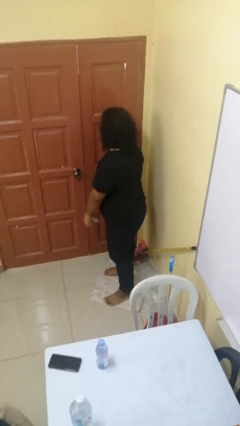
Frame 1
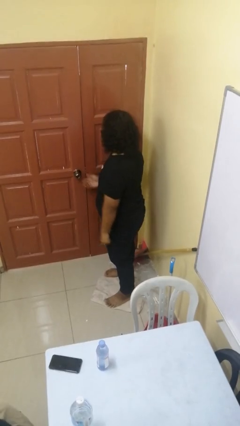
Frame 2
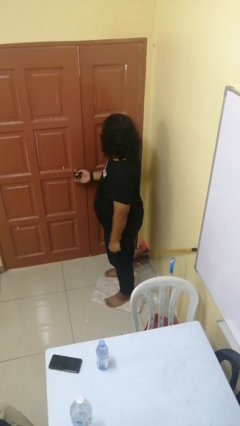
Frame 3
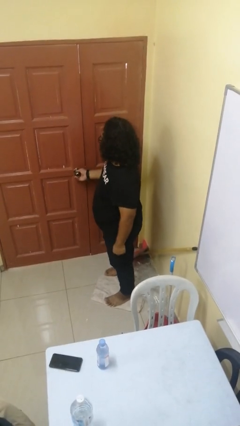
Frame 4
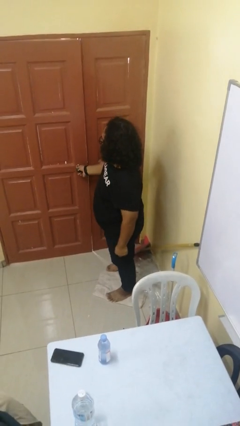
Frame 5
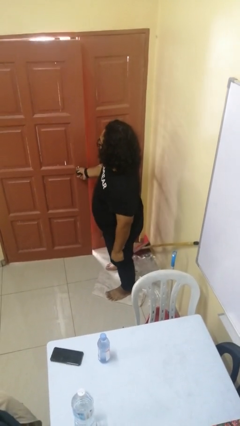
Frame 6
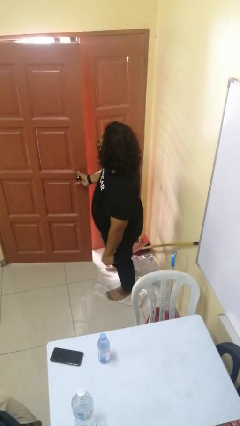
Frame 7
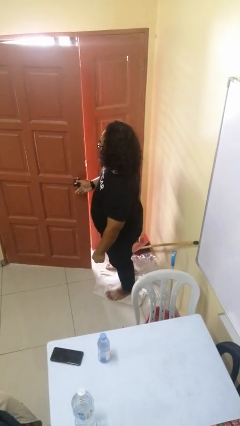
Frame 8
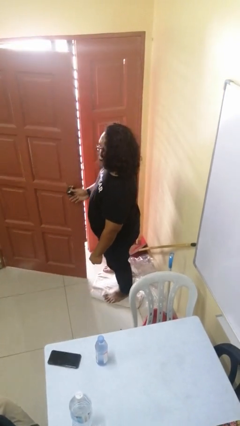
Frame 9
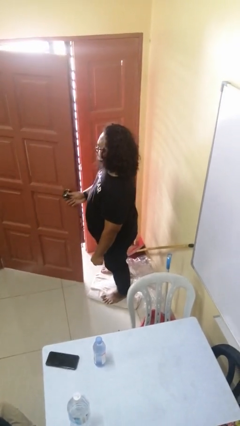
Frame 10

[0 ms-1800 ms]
person opens facility door

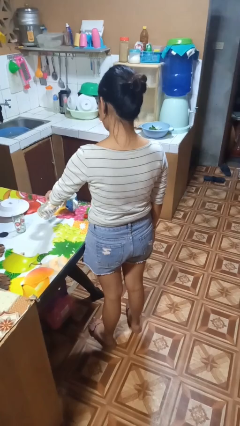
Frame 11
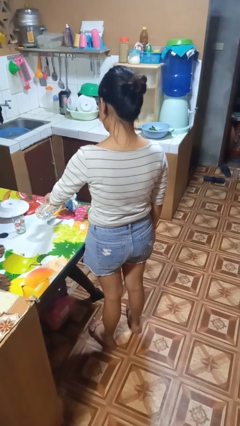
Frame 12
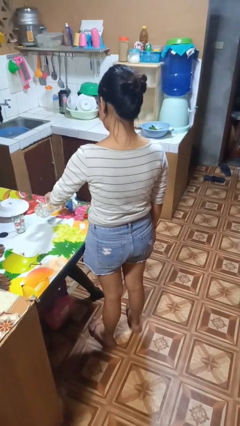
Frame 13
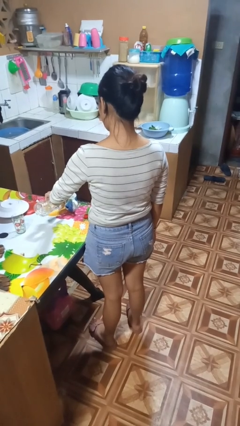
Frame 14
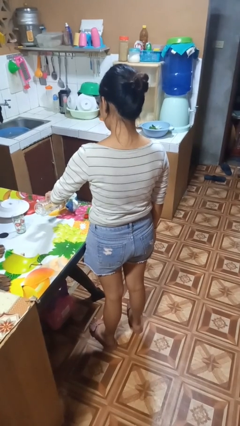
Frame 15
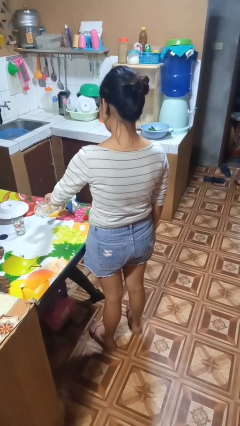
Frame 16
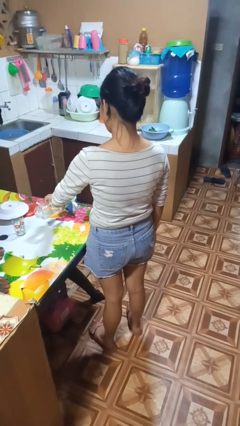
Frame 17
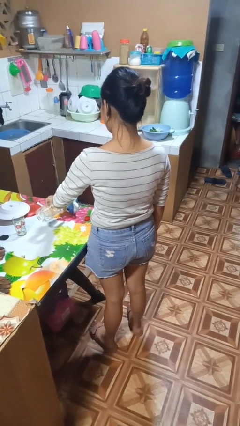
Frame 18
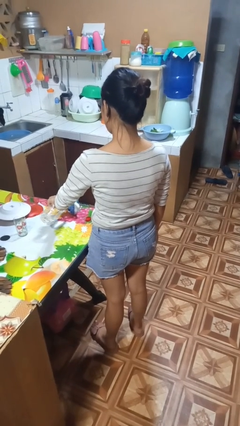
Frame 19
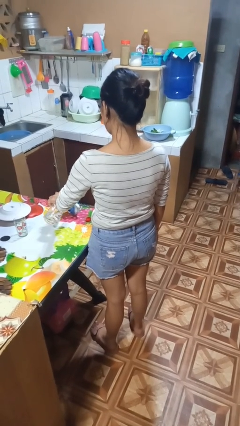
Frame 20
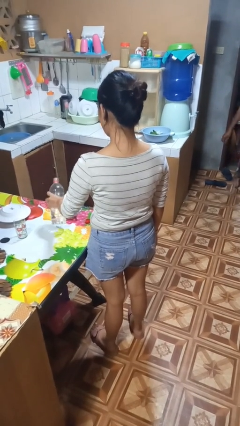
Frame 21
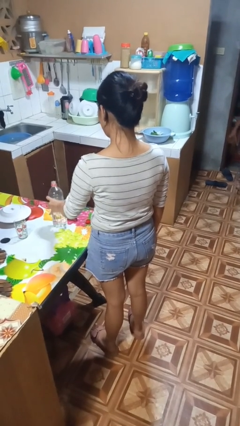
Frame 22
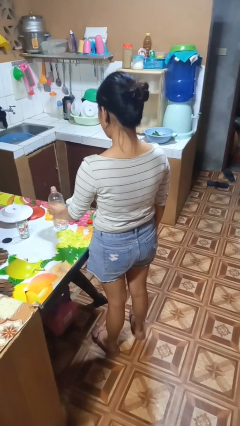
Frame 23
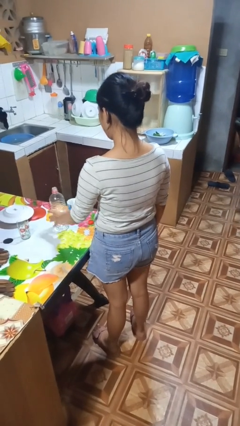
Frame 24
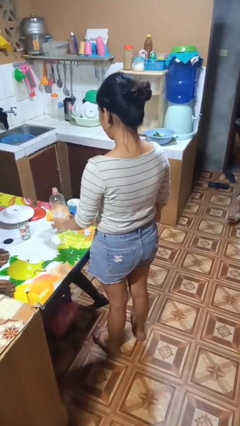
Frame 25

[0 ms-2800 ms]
person pours liquid into cup

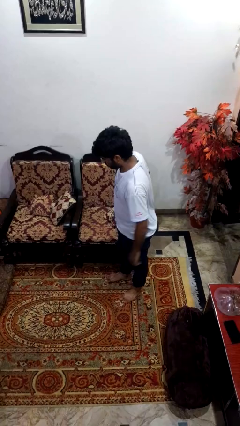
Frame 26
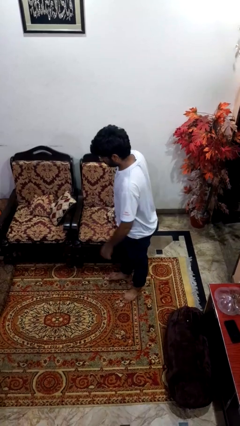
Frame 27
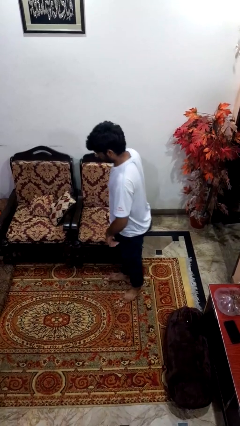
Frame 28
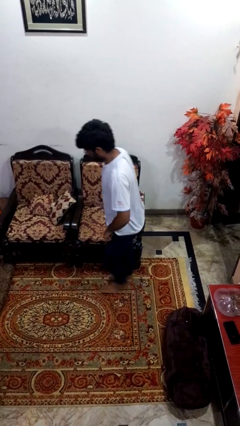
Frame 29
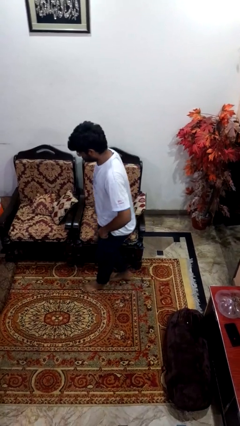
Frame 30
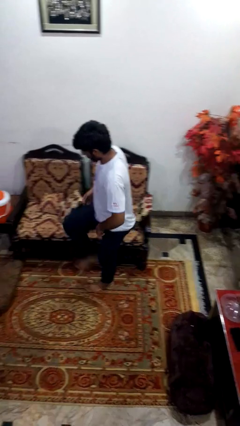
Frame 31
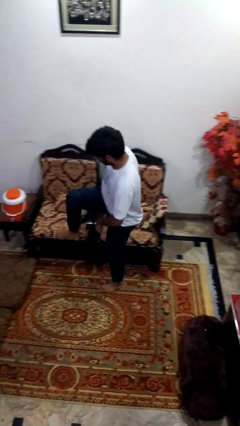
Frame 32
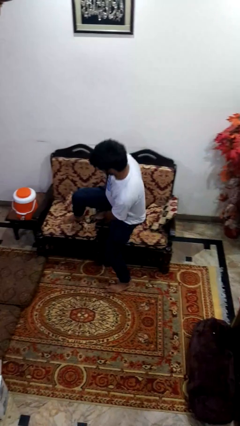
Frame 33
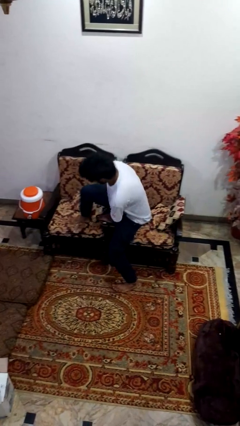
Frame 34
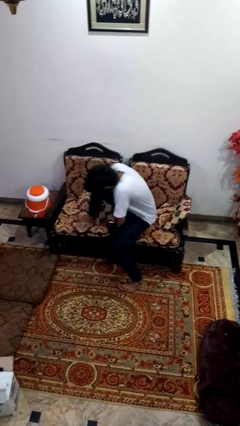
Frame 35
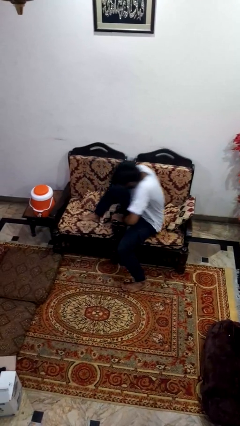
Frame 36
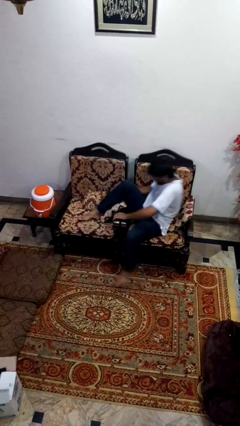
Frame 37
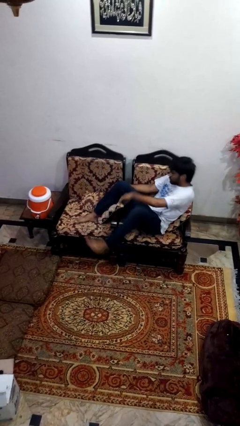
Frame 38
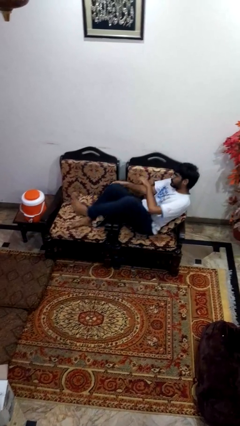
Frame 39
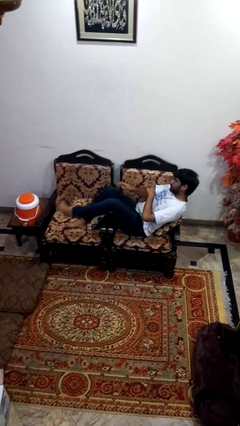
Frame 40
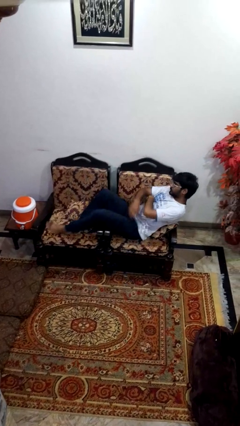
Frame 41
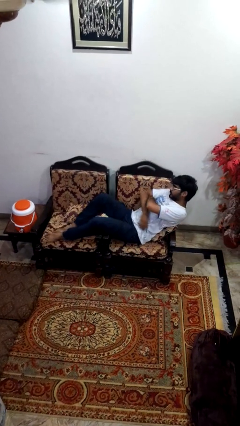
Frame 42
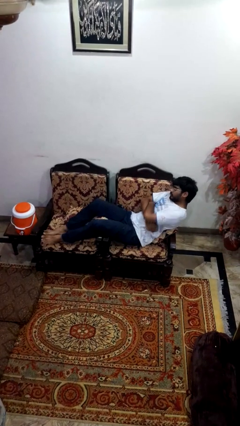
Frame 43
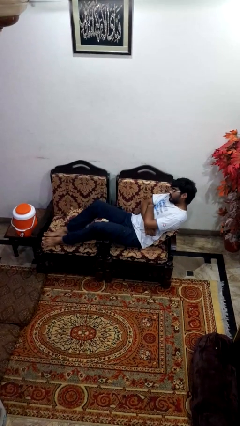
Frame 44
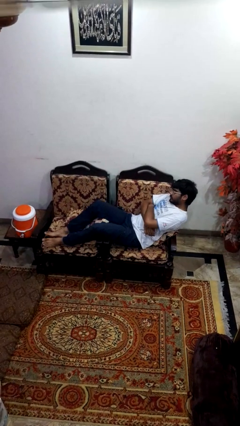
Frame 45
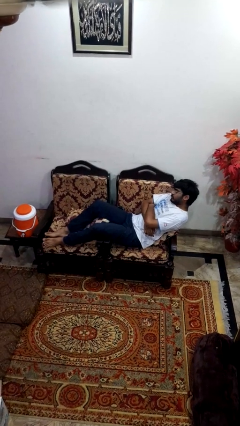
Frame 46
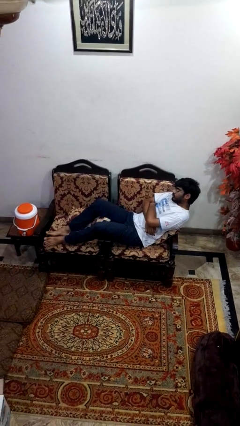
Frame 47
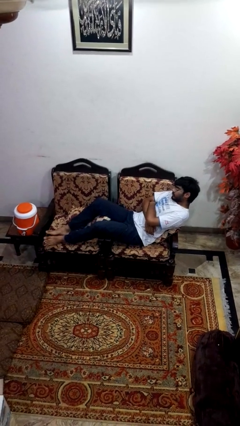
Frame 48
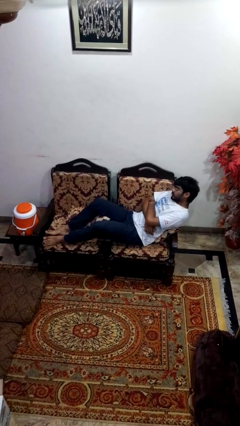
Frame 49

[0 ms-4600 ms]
person lies down on couch

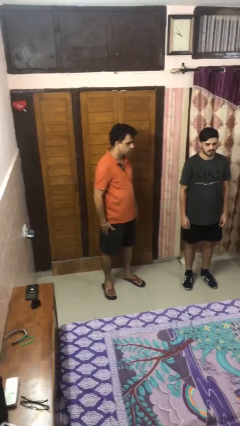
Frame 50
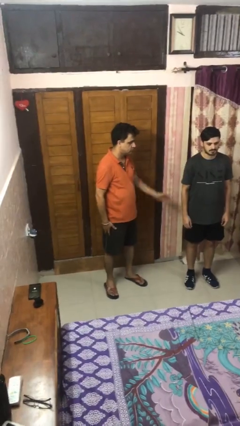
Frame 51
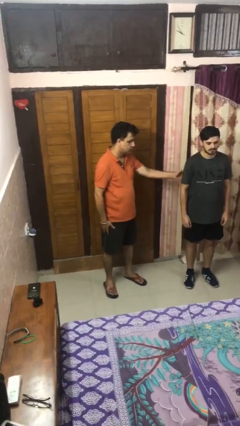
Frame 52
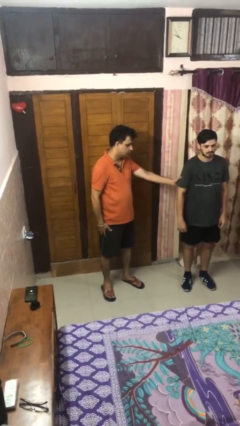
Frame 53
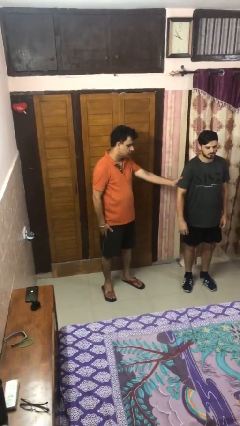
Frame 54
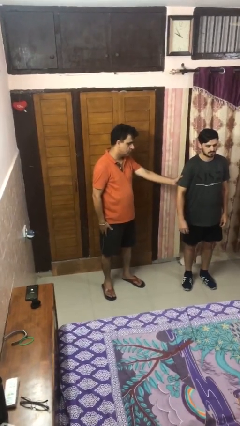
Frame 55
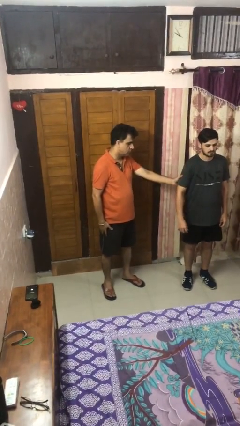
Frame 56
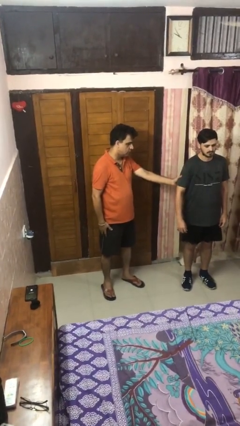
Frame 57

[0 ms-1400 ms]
person grabs person by bicep

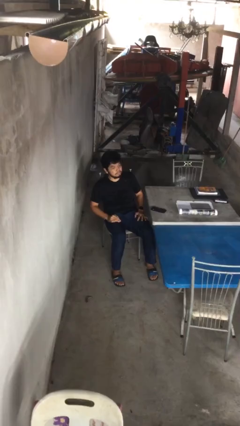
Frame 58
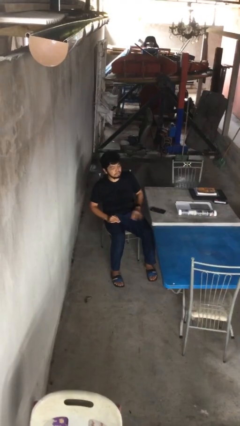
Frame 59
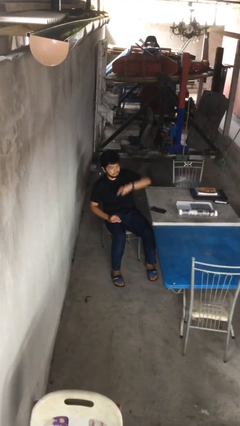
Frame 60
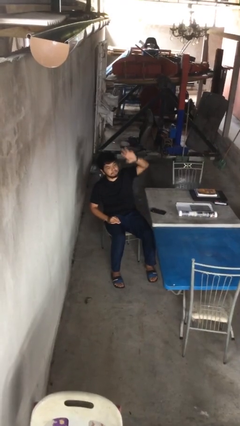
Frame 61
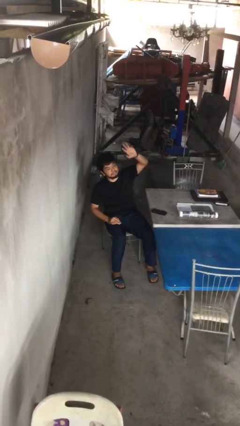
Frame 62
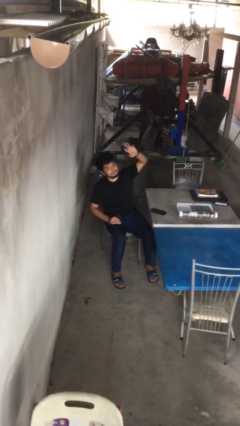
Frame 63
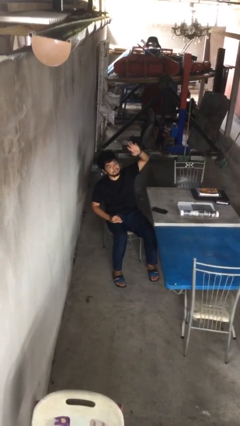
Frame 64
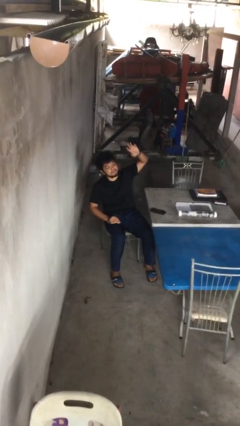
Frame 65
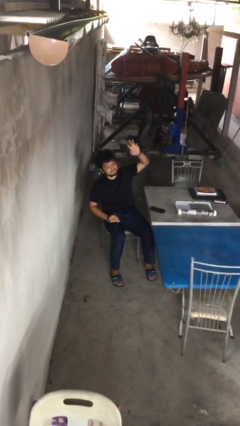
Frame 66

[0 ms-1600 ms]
person gestures swipe up

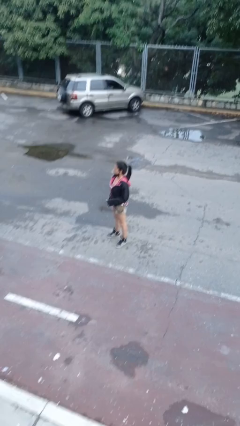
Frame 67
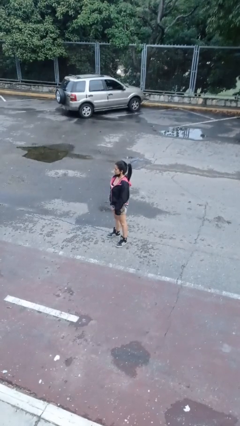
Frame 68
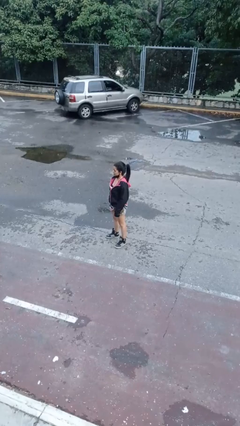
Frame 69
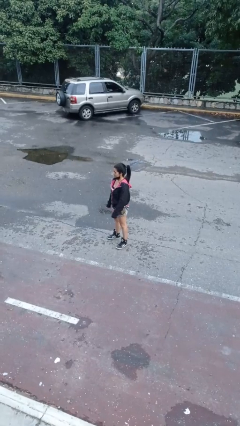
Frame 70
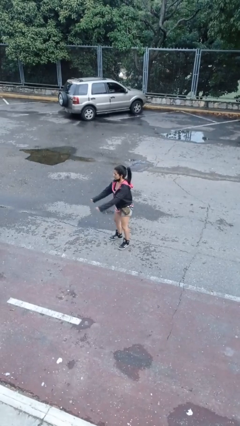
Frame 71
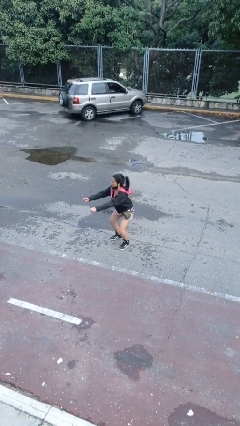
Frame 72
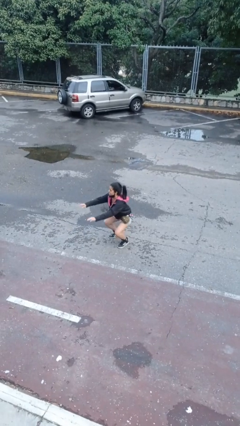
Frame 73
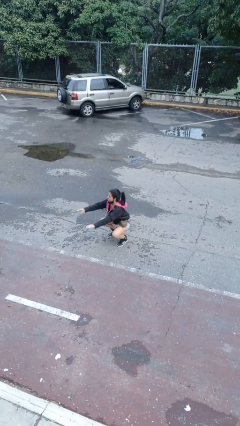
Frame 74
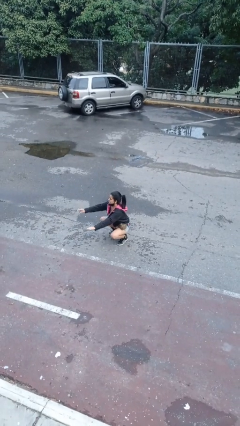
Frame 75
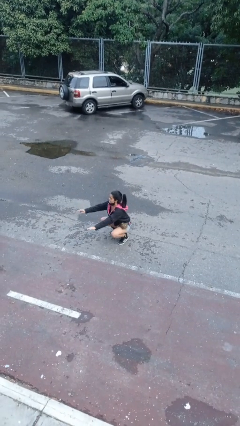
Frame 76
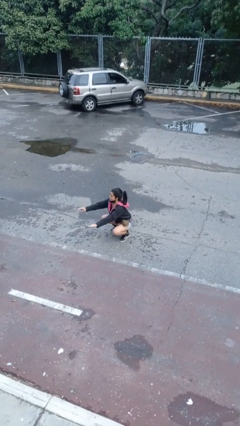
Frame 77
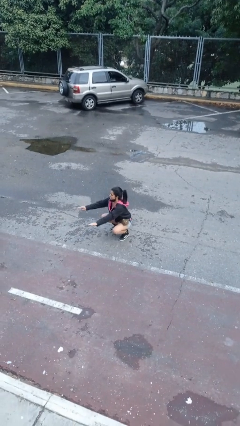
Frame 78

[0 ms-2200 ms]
person squats

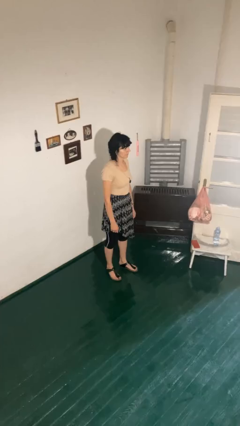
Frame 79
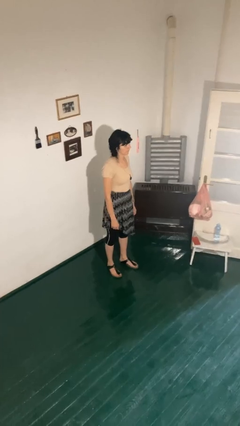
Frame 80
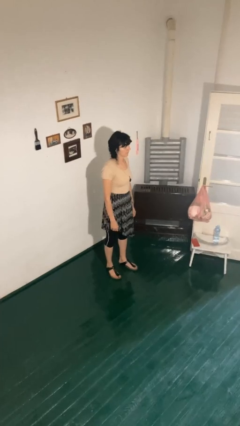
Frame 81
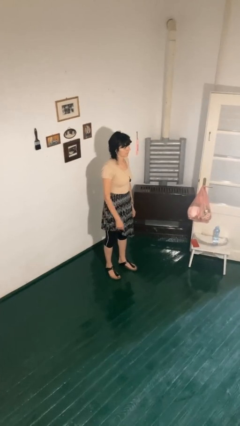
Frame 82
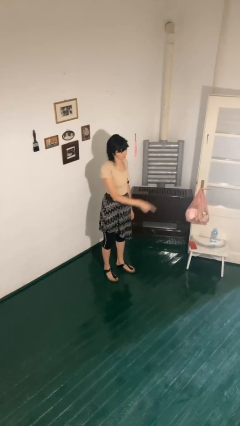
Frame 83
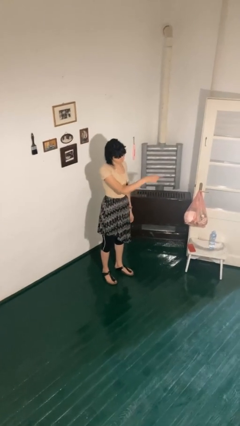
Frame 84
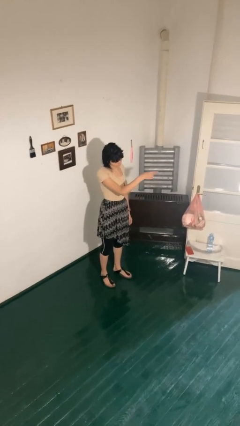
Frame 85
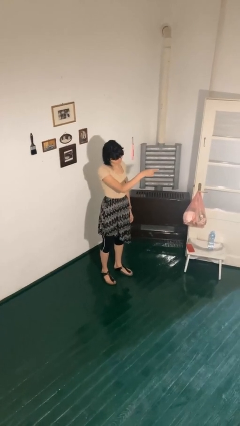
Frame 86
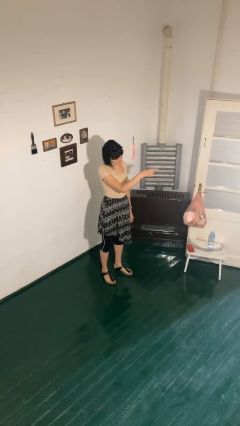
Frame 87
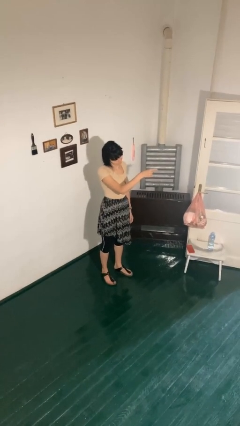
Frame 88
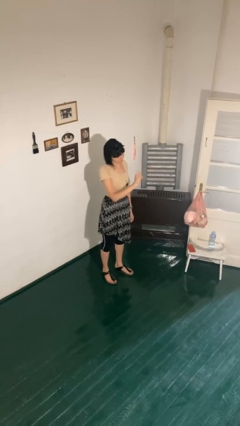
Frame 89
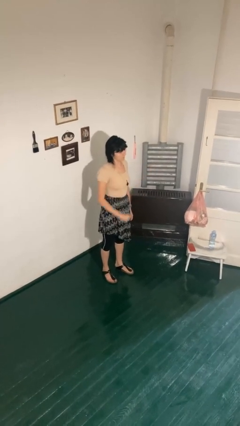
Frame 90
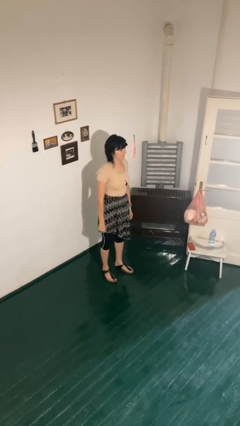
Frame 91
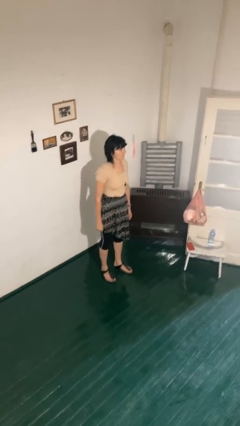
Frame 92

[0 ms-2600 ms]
person points at person

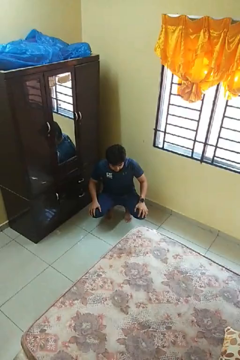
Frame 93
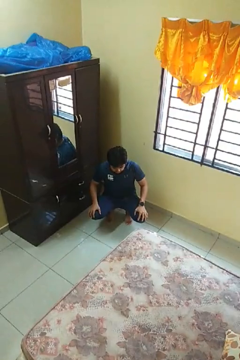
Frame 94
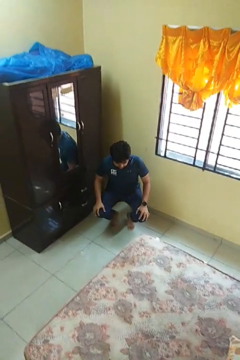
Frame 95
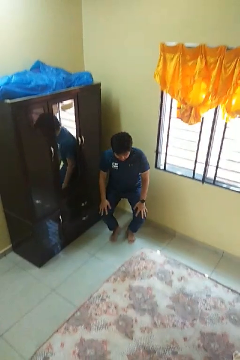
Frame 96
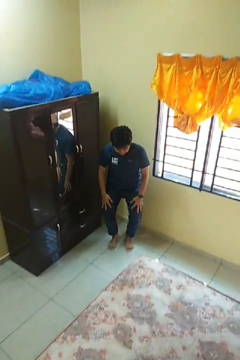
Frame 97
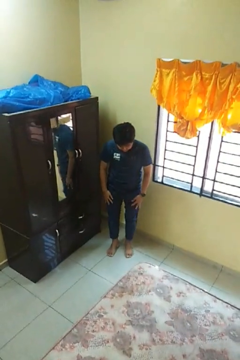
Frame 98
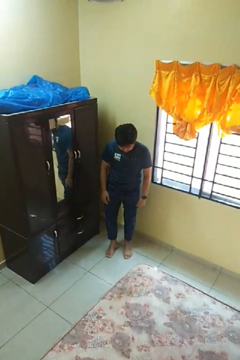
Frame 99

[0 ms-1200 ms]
person stands up
